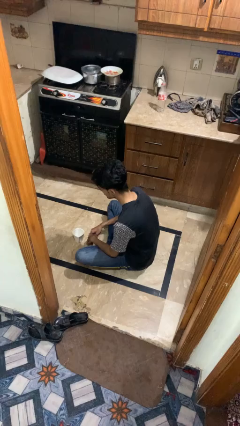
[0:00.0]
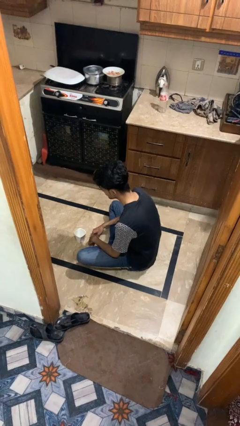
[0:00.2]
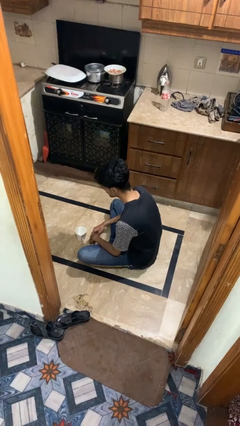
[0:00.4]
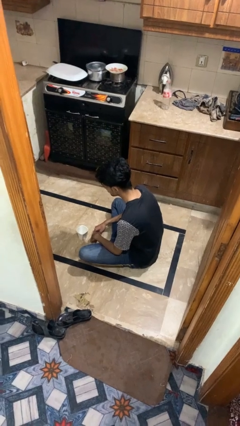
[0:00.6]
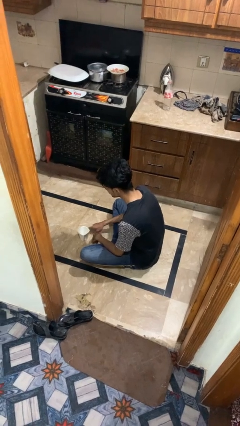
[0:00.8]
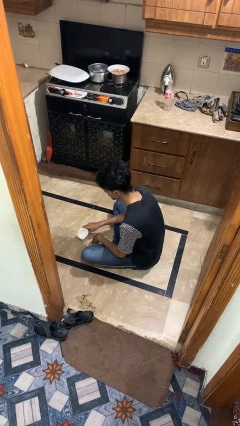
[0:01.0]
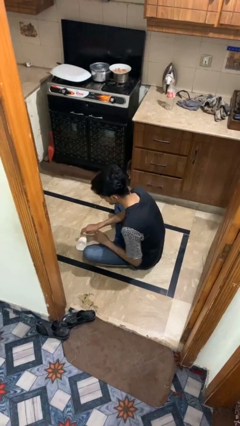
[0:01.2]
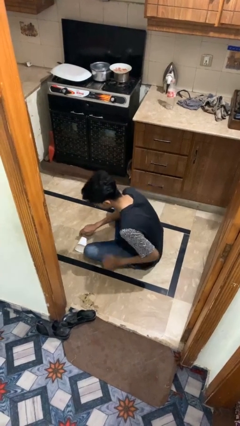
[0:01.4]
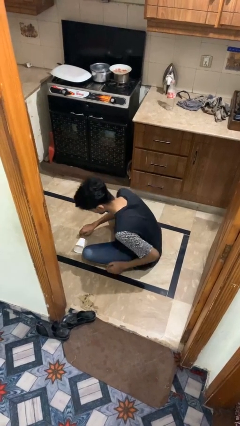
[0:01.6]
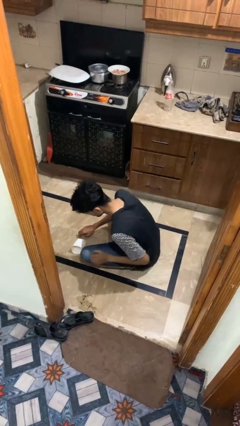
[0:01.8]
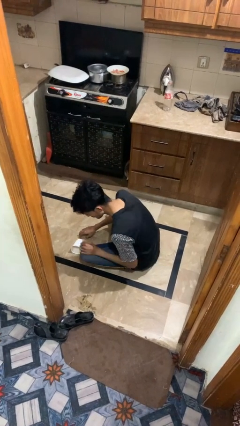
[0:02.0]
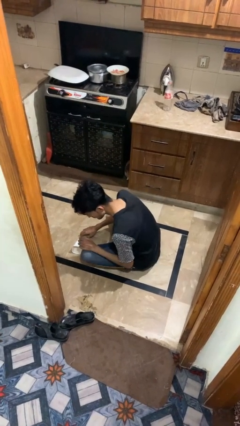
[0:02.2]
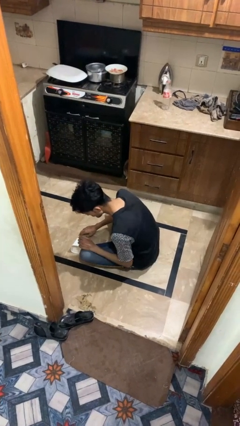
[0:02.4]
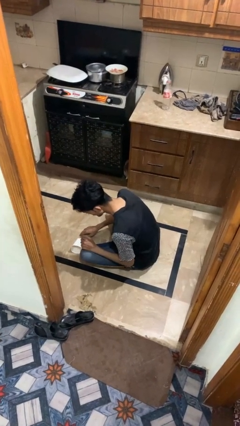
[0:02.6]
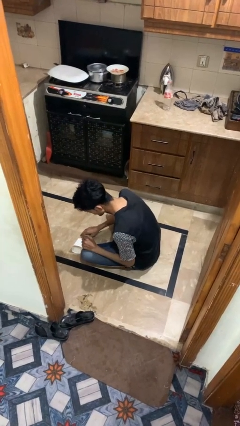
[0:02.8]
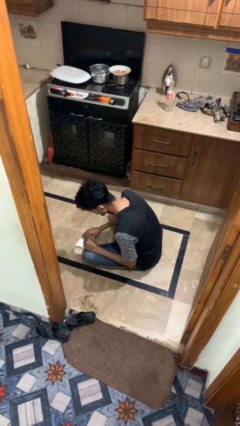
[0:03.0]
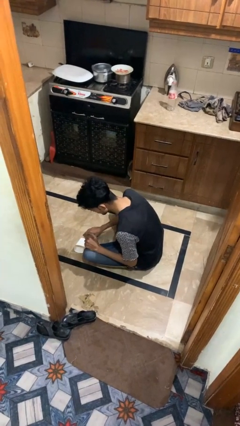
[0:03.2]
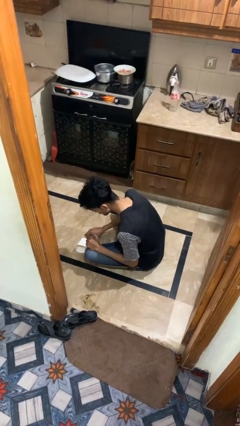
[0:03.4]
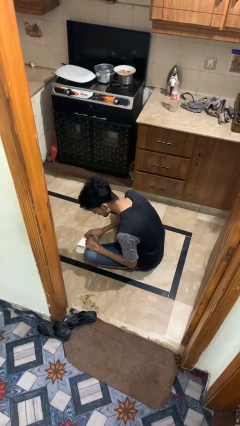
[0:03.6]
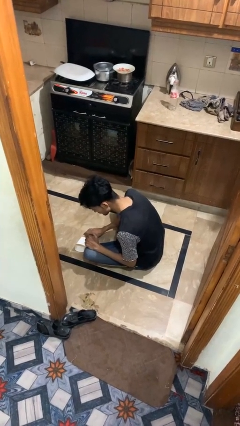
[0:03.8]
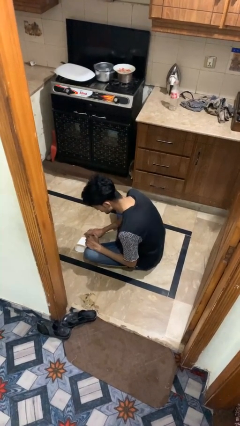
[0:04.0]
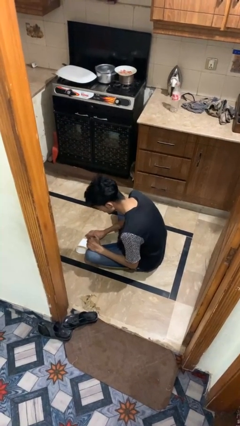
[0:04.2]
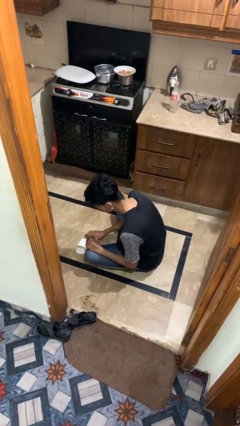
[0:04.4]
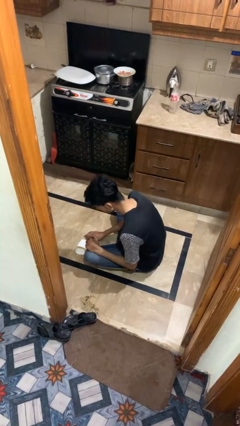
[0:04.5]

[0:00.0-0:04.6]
person spills on floor

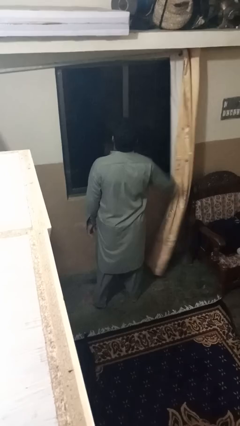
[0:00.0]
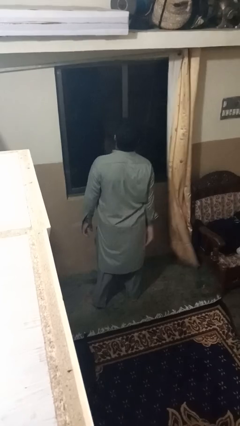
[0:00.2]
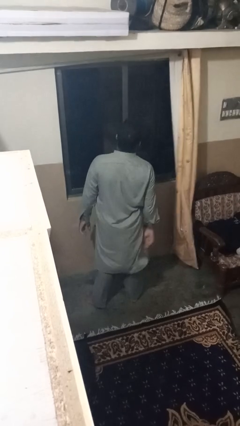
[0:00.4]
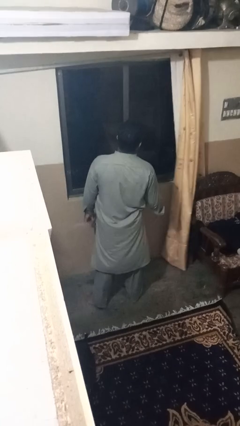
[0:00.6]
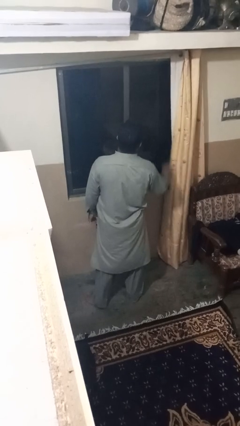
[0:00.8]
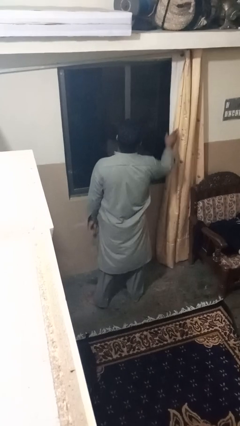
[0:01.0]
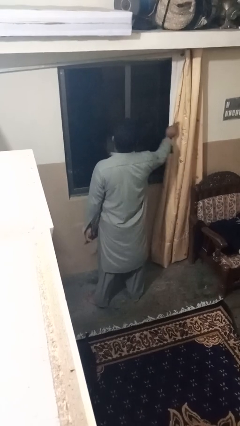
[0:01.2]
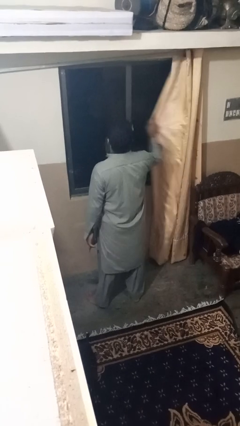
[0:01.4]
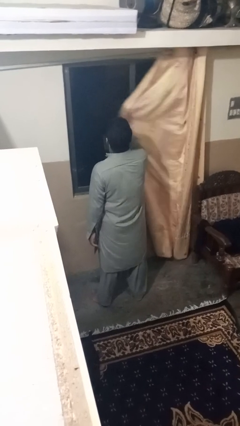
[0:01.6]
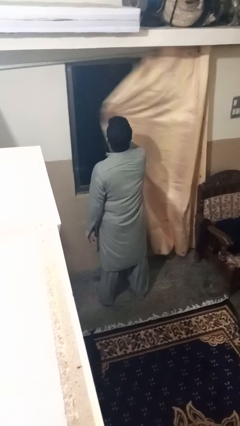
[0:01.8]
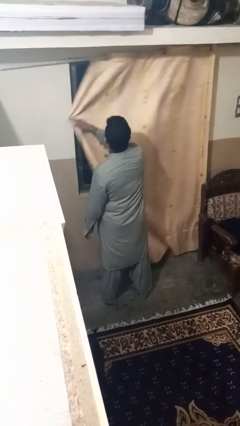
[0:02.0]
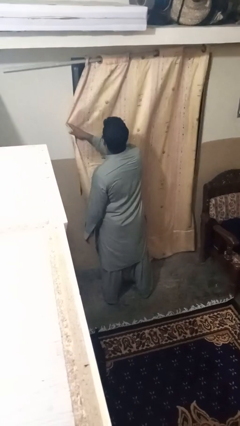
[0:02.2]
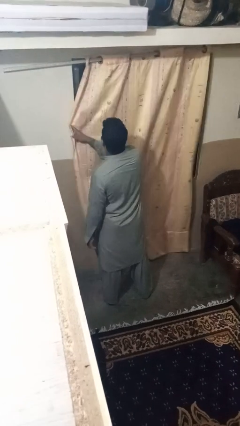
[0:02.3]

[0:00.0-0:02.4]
person closes curtains

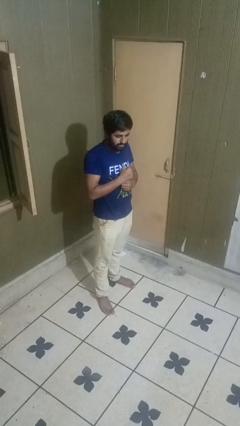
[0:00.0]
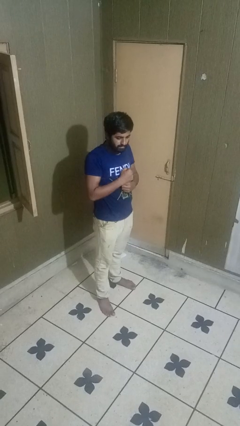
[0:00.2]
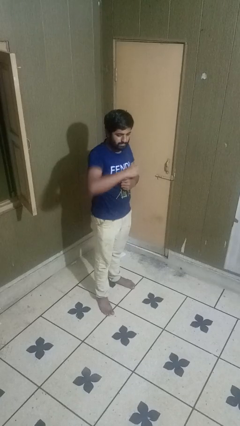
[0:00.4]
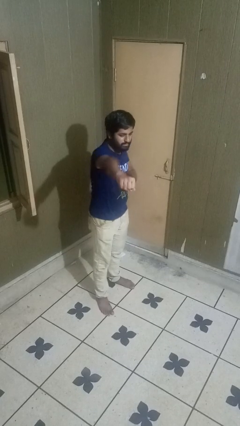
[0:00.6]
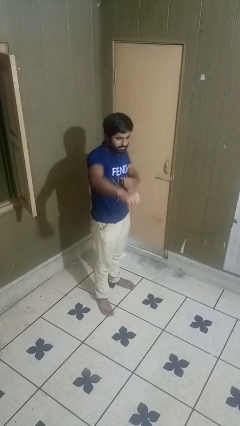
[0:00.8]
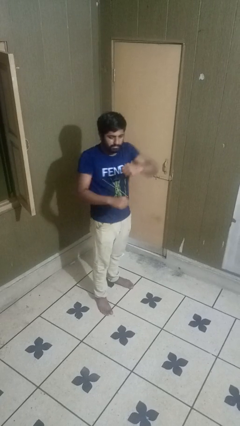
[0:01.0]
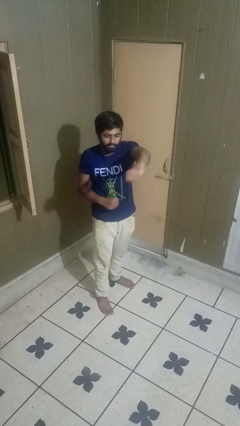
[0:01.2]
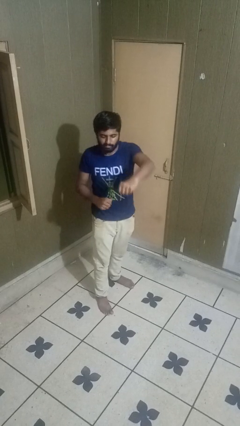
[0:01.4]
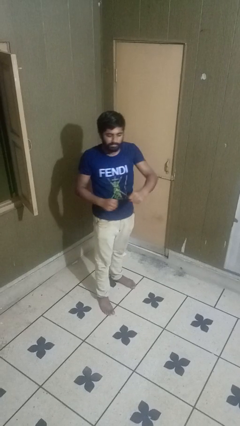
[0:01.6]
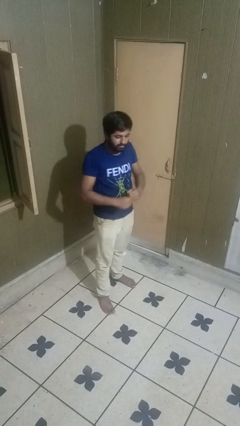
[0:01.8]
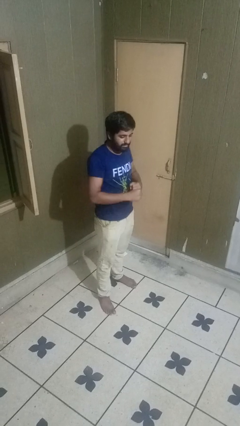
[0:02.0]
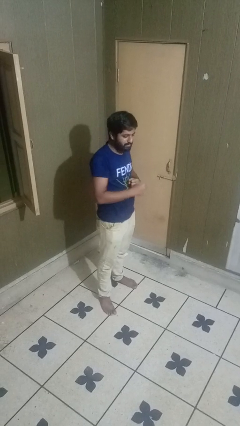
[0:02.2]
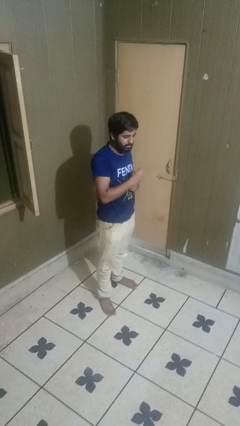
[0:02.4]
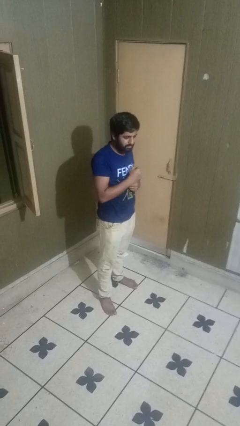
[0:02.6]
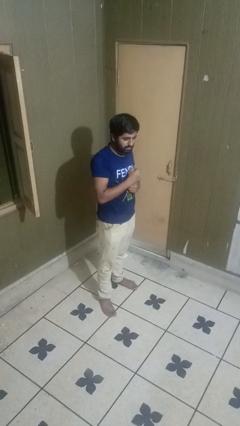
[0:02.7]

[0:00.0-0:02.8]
person punches

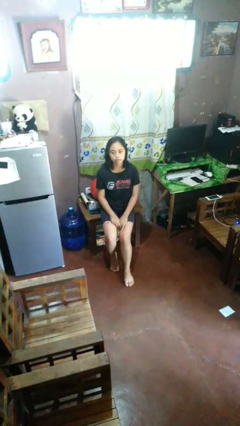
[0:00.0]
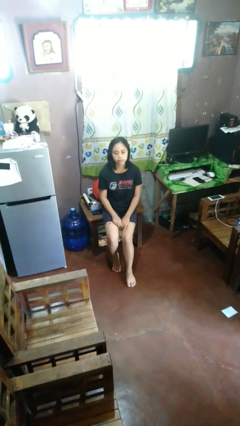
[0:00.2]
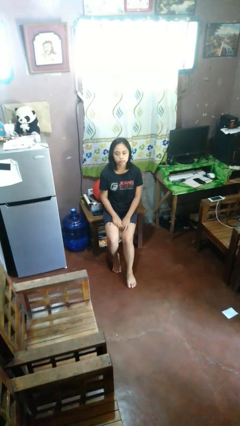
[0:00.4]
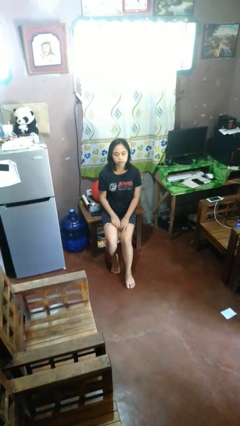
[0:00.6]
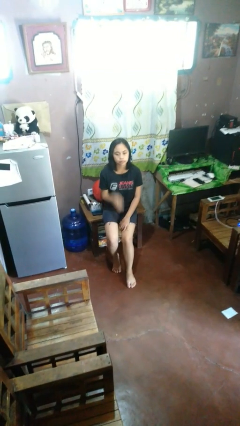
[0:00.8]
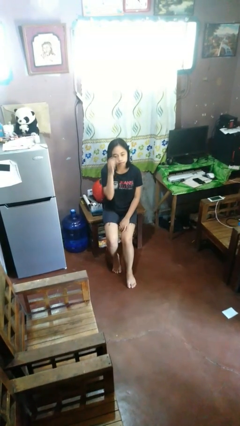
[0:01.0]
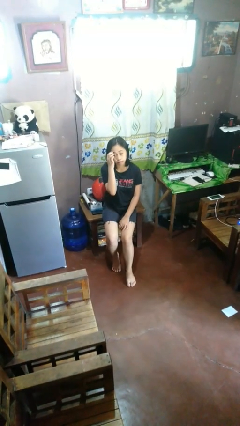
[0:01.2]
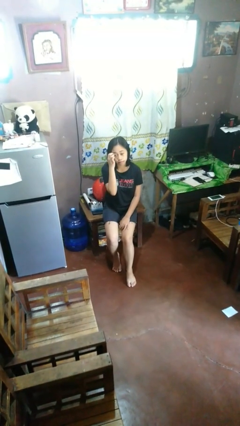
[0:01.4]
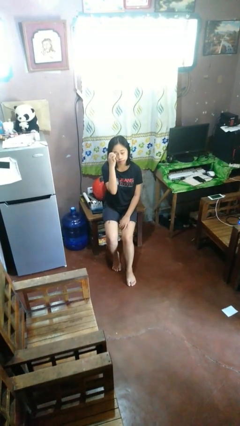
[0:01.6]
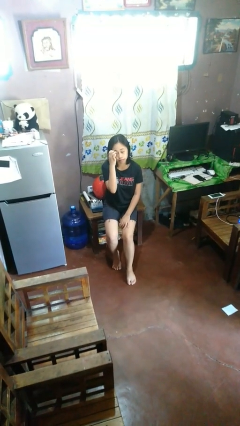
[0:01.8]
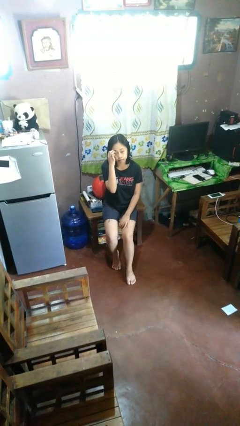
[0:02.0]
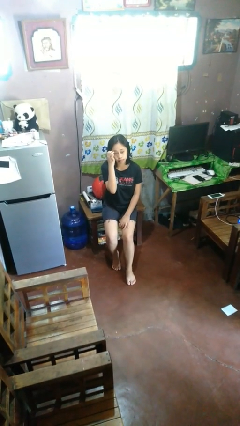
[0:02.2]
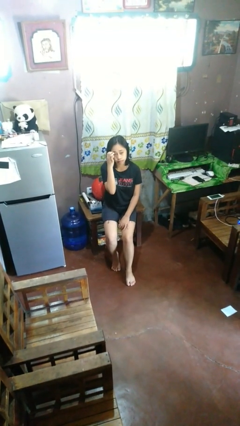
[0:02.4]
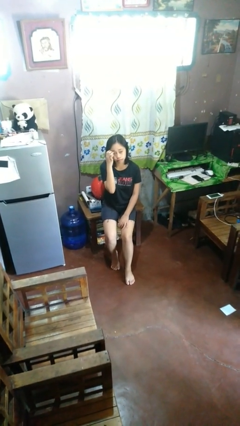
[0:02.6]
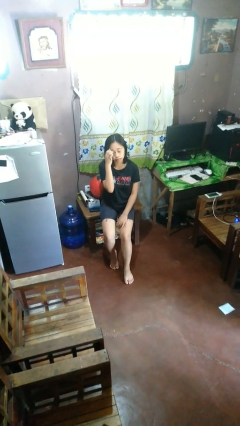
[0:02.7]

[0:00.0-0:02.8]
person scratches face

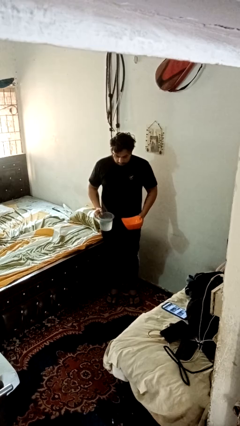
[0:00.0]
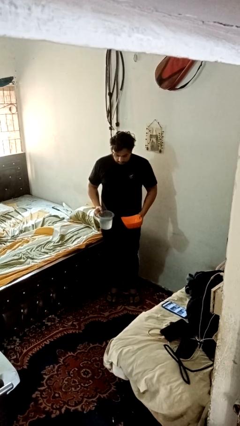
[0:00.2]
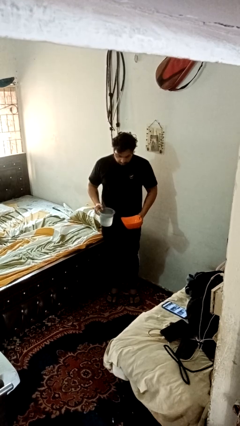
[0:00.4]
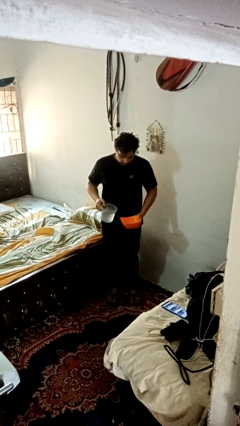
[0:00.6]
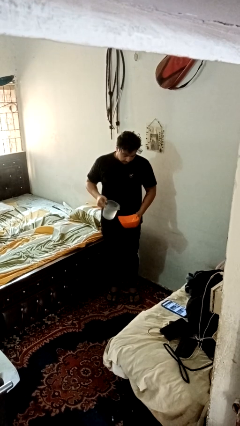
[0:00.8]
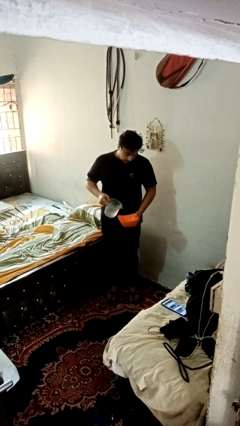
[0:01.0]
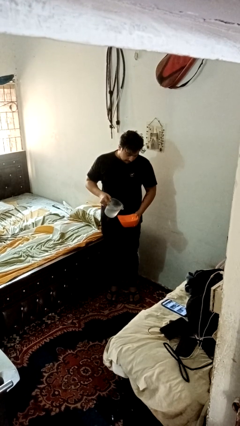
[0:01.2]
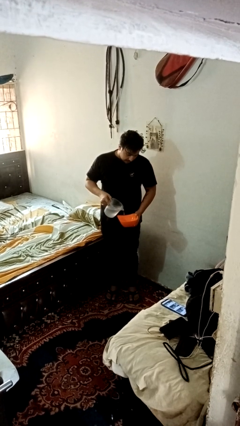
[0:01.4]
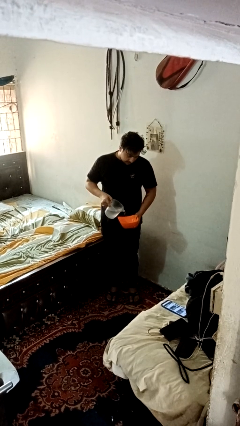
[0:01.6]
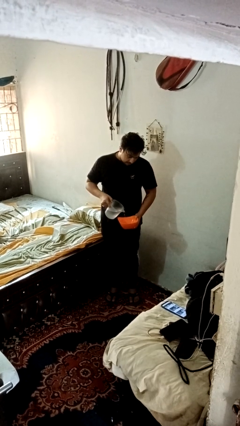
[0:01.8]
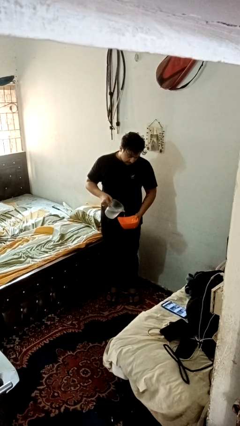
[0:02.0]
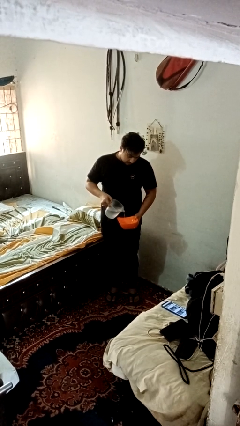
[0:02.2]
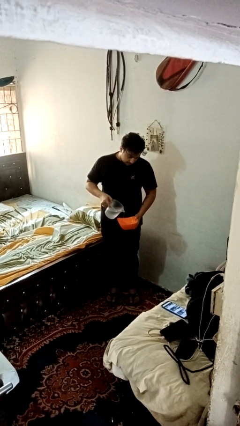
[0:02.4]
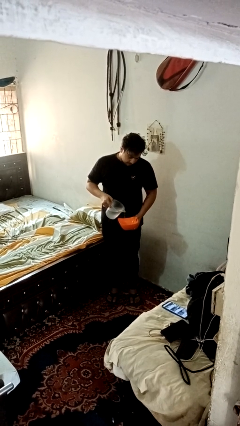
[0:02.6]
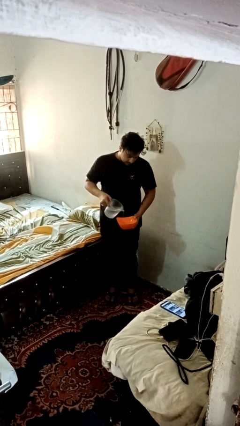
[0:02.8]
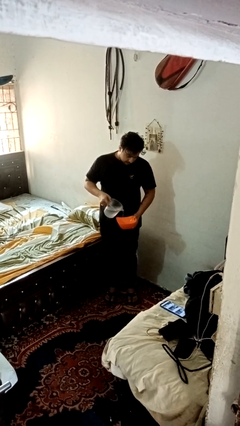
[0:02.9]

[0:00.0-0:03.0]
person pours into bowl

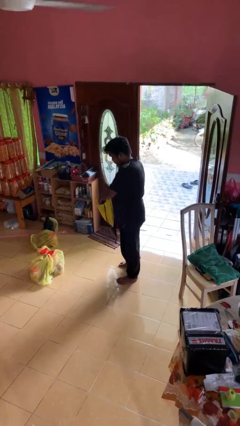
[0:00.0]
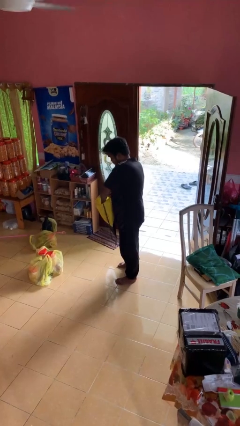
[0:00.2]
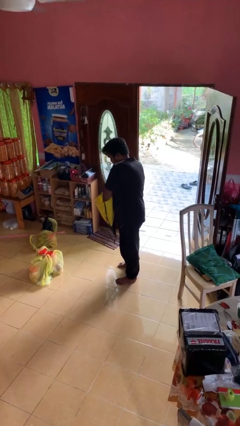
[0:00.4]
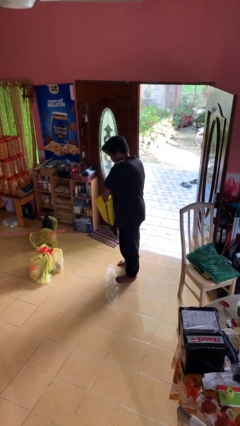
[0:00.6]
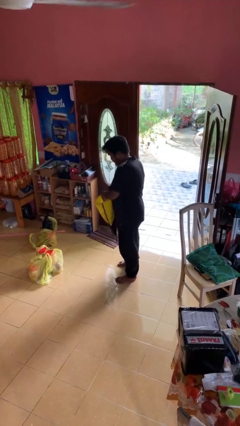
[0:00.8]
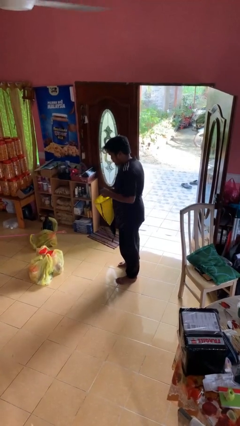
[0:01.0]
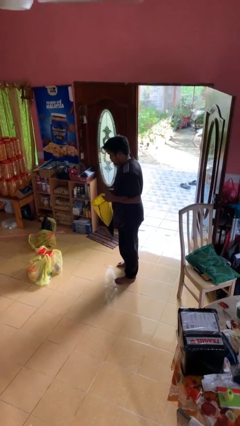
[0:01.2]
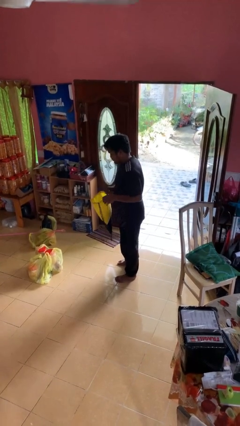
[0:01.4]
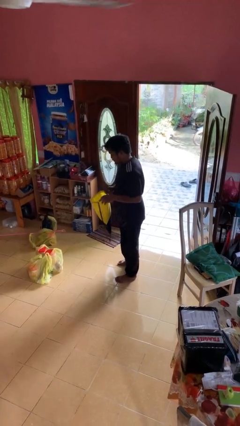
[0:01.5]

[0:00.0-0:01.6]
person puts object into bag

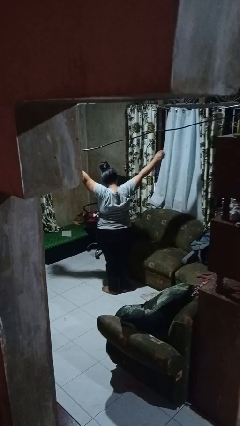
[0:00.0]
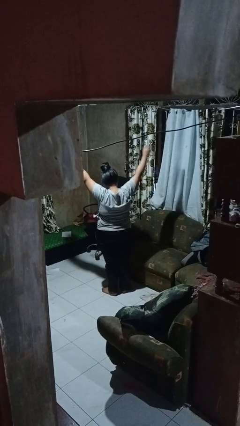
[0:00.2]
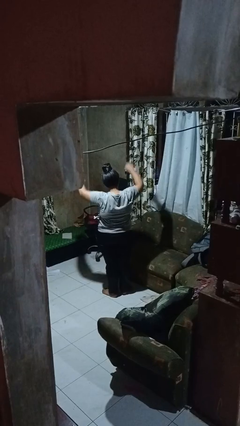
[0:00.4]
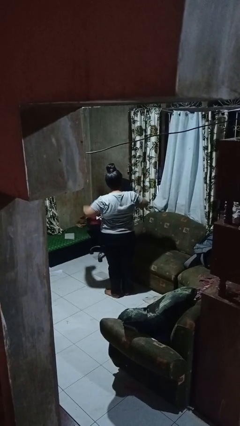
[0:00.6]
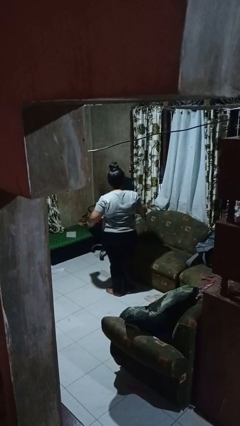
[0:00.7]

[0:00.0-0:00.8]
person stretches arms over head
